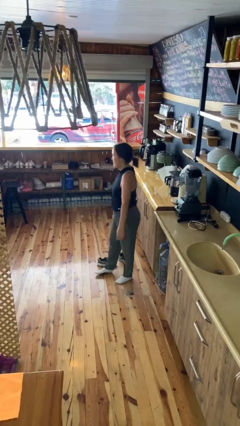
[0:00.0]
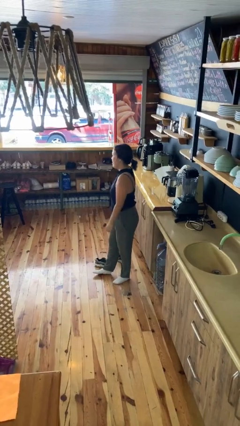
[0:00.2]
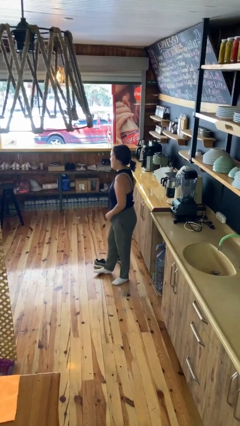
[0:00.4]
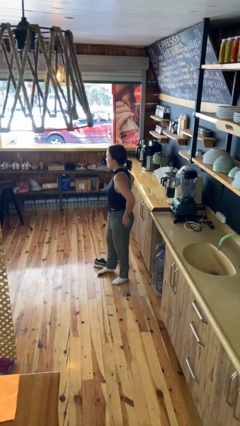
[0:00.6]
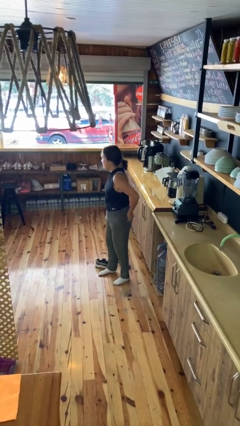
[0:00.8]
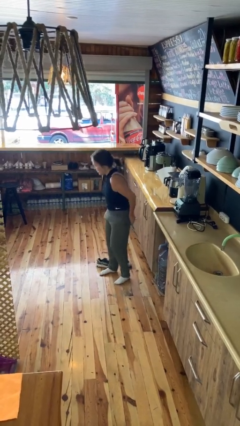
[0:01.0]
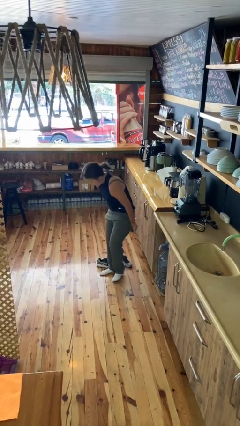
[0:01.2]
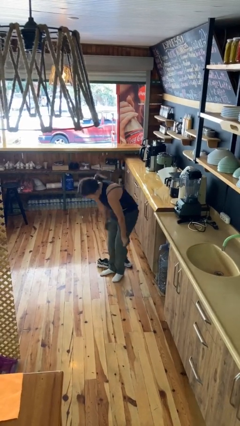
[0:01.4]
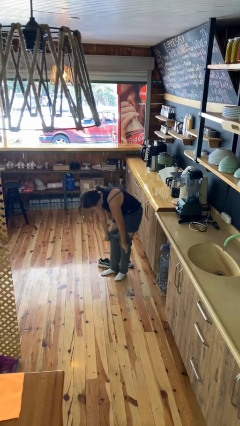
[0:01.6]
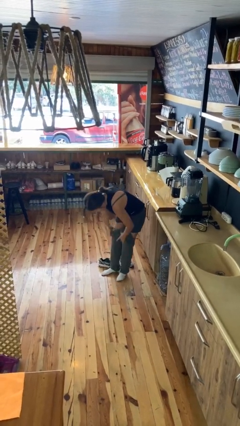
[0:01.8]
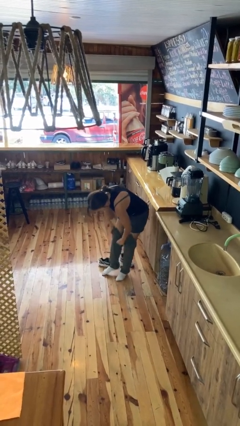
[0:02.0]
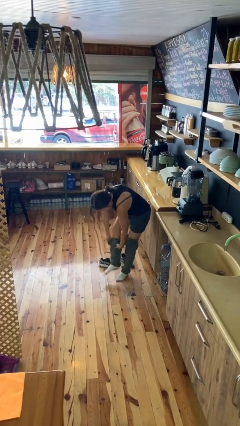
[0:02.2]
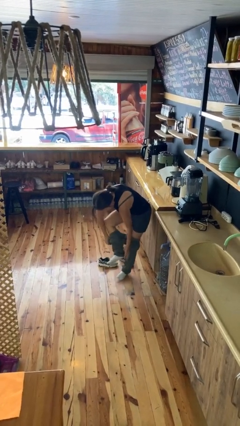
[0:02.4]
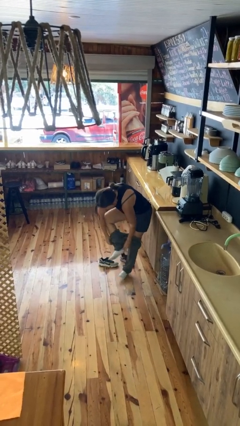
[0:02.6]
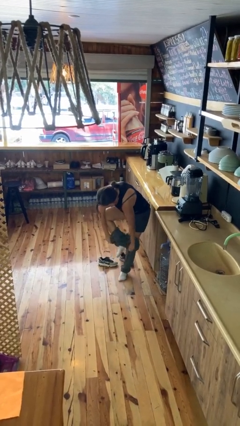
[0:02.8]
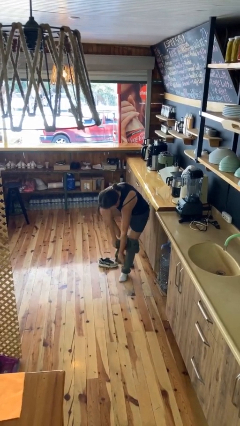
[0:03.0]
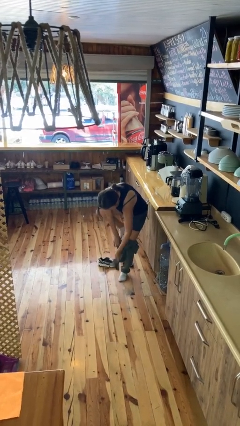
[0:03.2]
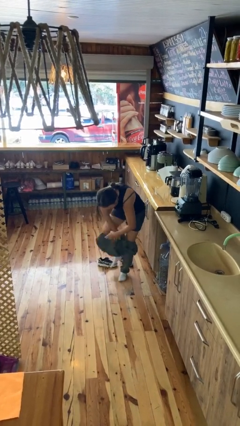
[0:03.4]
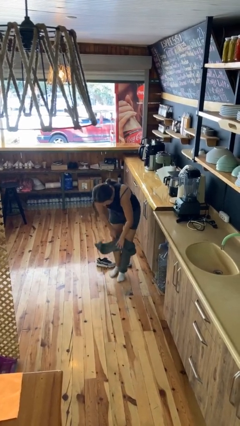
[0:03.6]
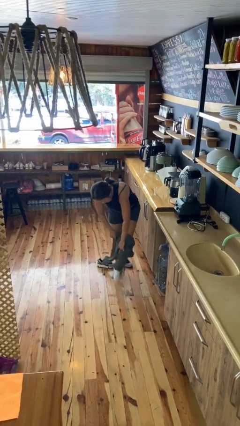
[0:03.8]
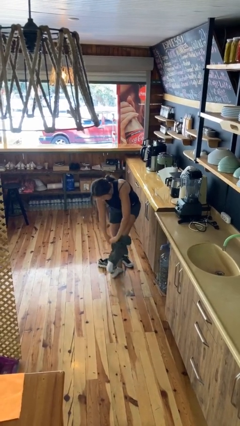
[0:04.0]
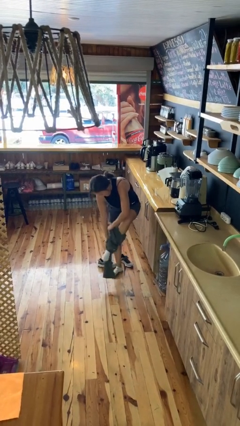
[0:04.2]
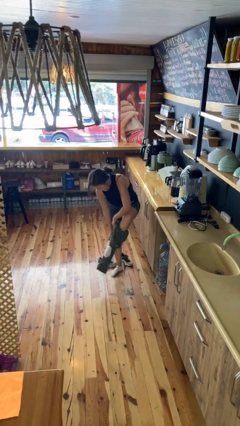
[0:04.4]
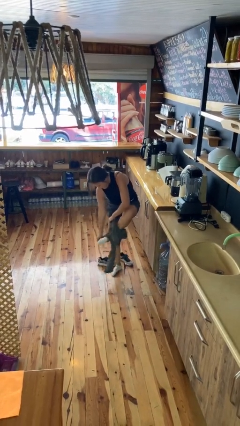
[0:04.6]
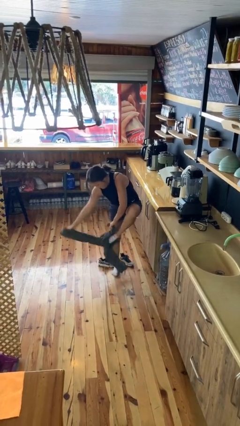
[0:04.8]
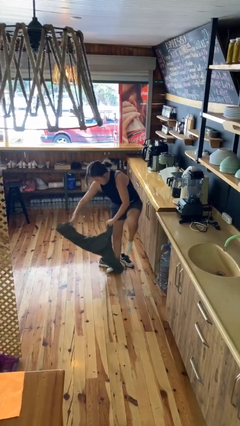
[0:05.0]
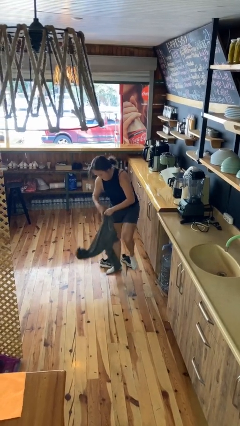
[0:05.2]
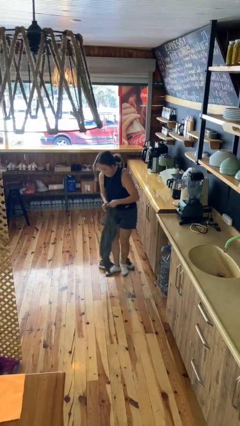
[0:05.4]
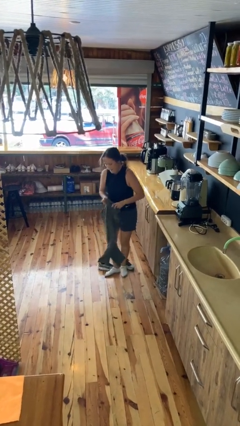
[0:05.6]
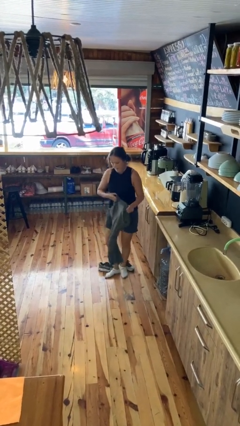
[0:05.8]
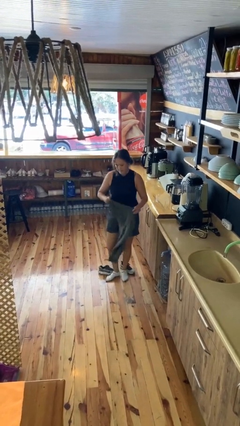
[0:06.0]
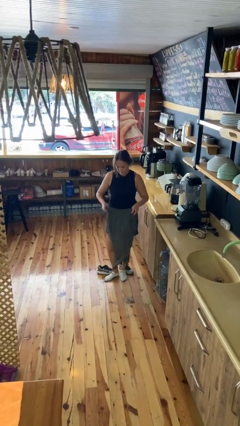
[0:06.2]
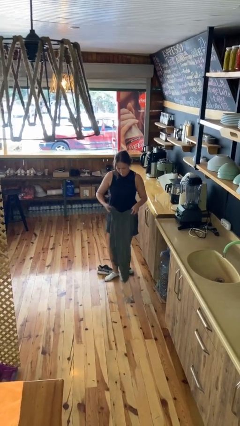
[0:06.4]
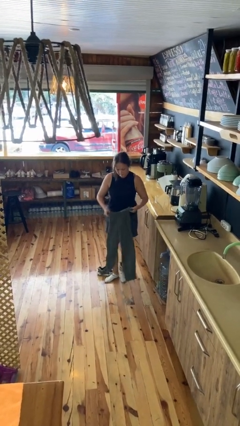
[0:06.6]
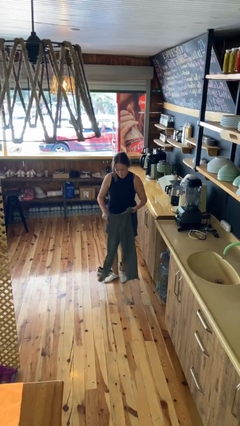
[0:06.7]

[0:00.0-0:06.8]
person takes off pants

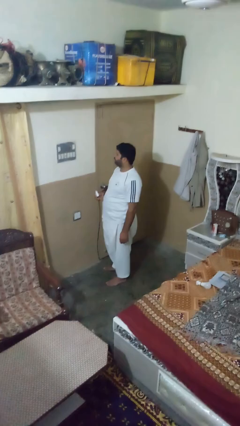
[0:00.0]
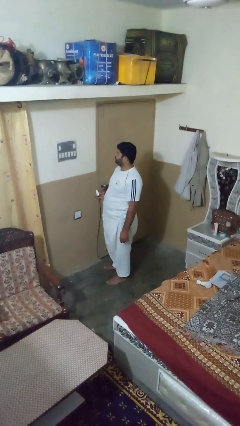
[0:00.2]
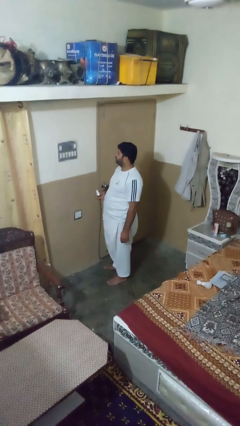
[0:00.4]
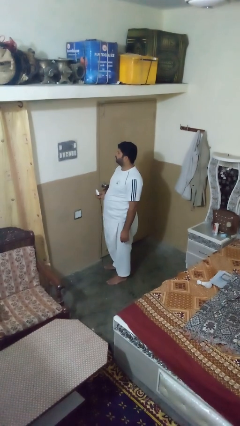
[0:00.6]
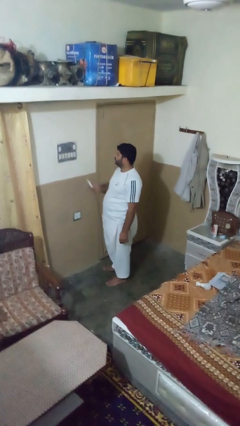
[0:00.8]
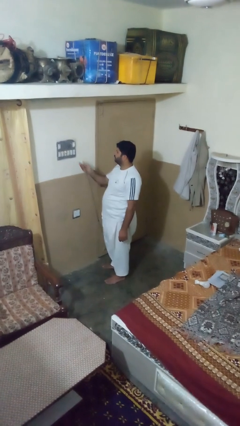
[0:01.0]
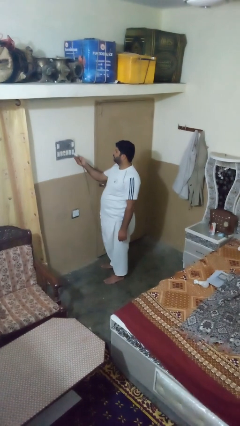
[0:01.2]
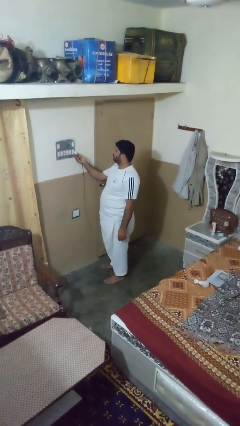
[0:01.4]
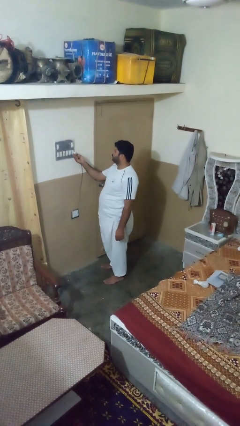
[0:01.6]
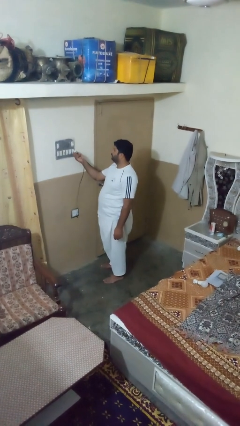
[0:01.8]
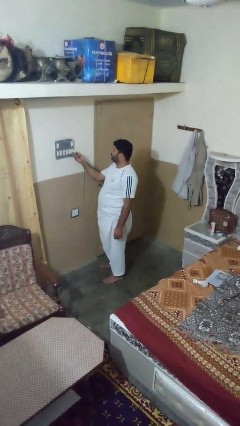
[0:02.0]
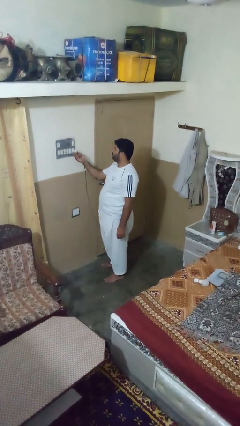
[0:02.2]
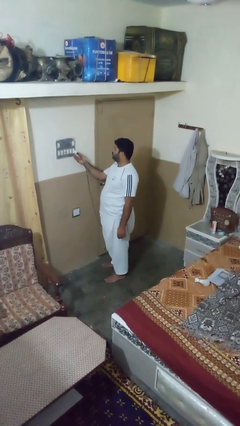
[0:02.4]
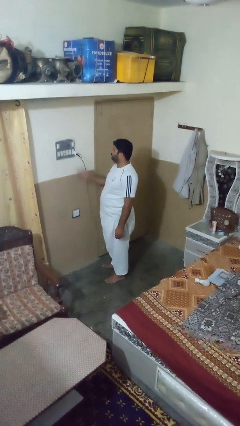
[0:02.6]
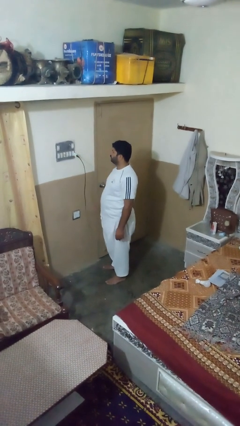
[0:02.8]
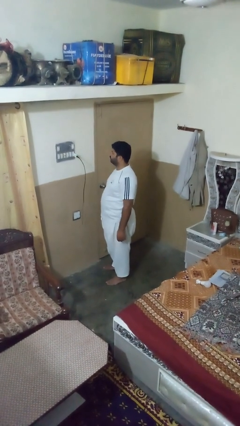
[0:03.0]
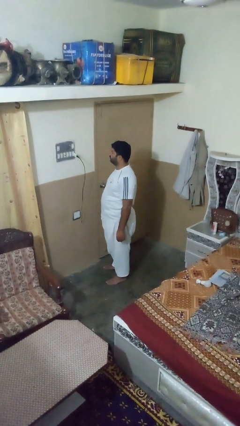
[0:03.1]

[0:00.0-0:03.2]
person plugs into electrical socket

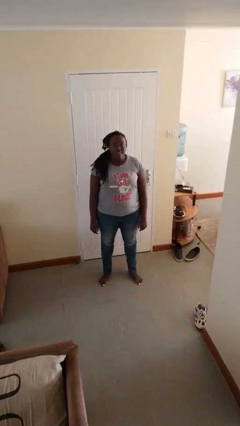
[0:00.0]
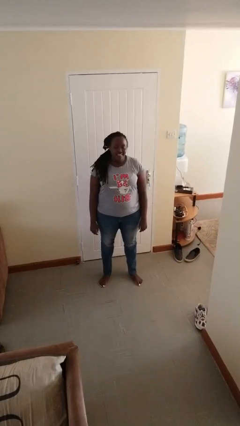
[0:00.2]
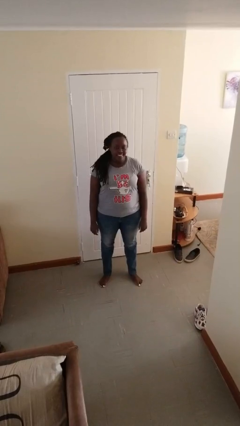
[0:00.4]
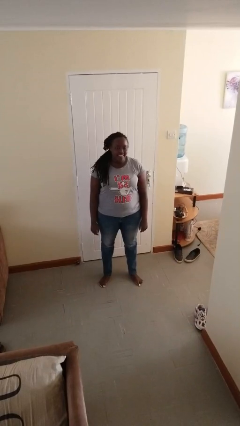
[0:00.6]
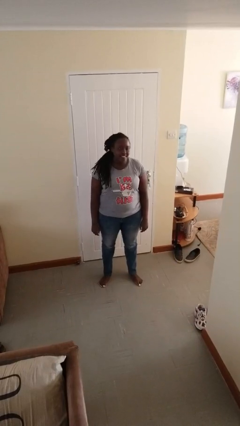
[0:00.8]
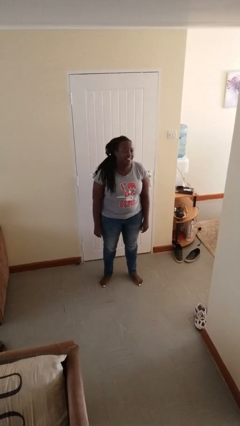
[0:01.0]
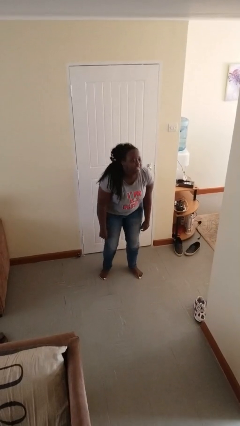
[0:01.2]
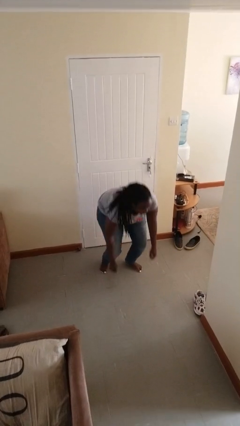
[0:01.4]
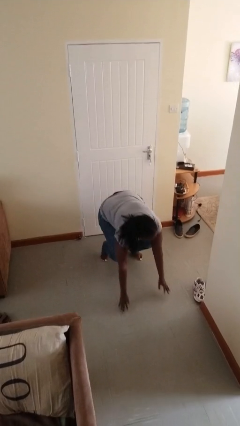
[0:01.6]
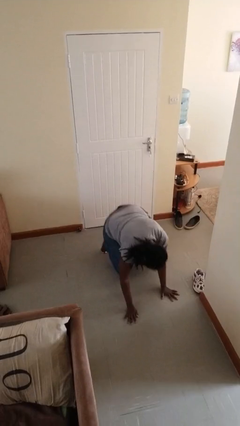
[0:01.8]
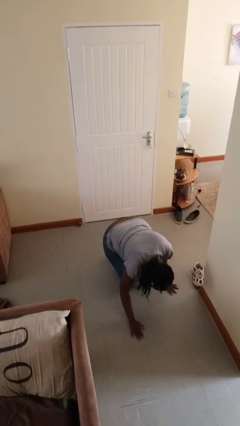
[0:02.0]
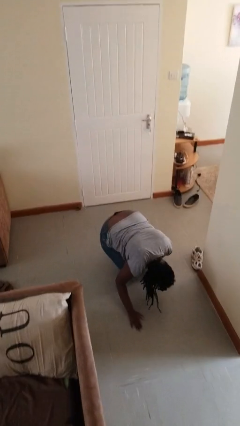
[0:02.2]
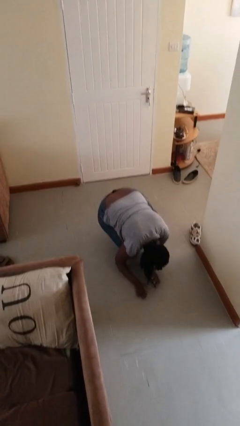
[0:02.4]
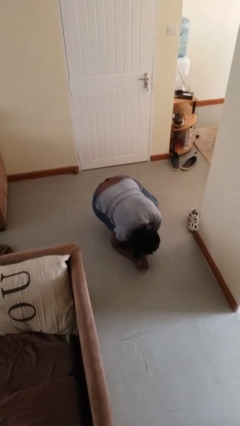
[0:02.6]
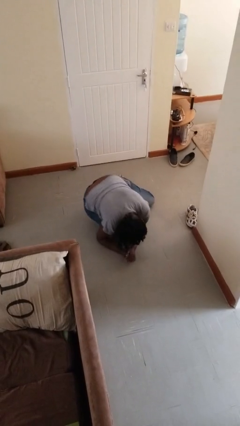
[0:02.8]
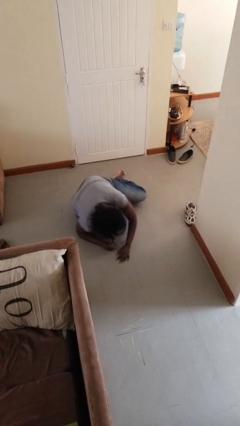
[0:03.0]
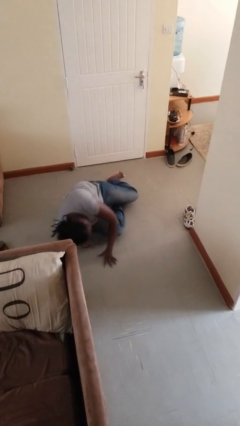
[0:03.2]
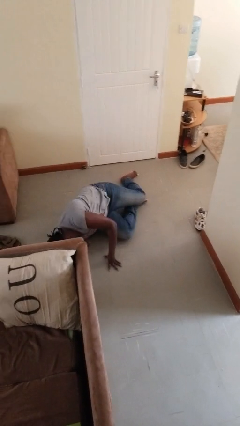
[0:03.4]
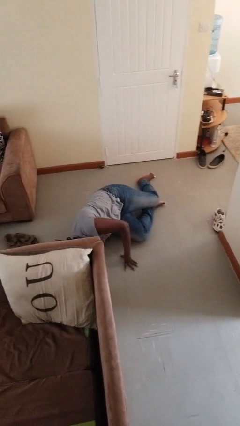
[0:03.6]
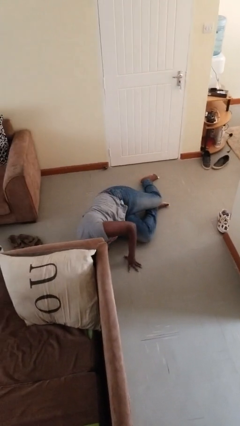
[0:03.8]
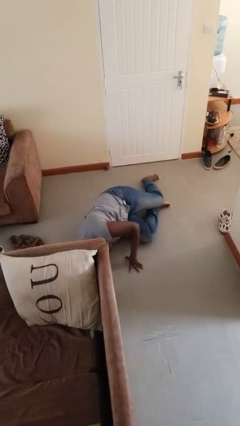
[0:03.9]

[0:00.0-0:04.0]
person falls while standing

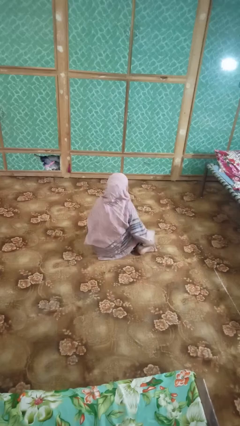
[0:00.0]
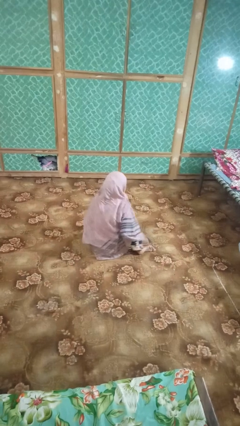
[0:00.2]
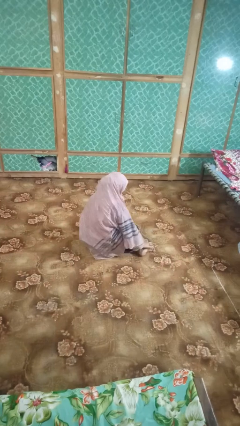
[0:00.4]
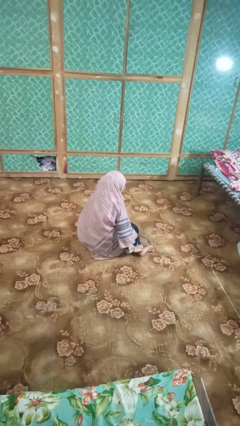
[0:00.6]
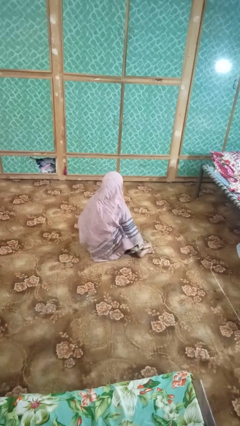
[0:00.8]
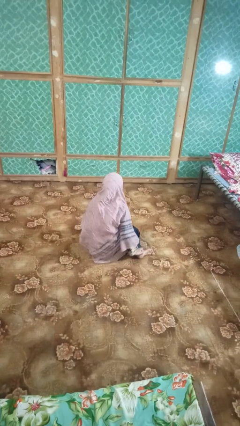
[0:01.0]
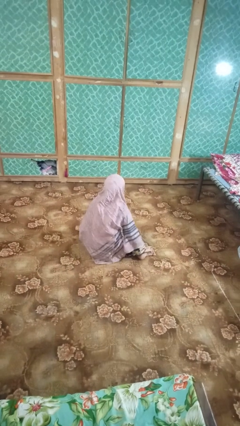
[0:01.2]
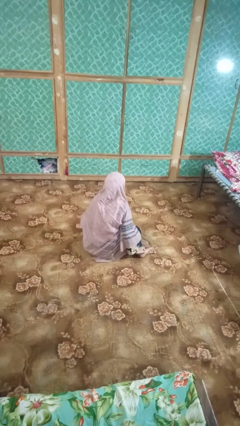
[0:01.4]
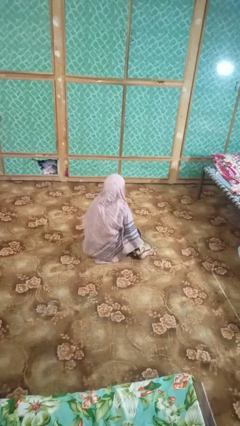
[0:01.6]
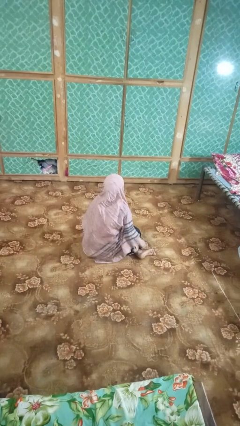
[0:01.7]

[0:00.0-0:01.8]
person rubs foot

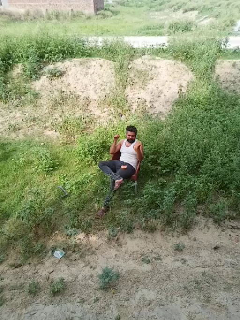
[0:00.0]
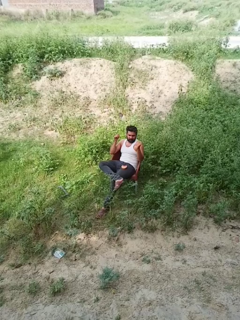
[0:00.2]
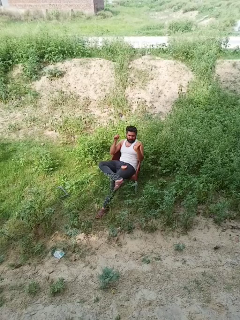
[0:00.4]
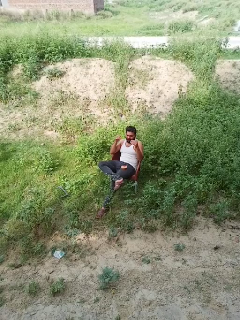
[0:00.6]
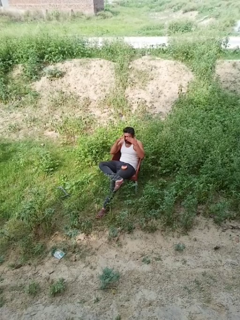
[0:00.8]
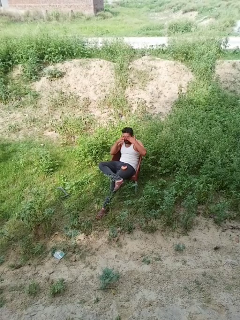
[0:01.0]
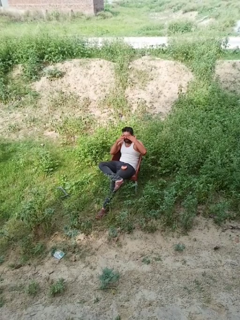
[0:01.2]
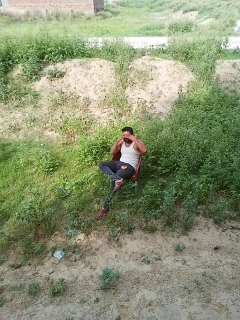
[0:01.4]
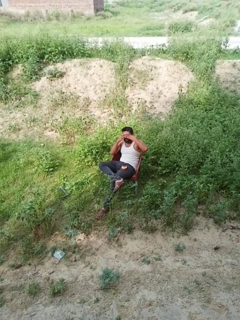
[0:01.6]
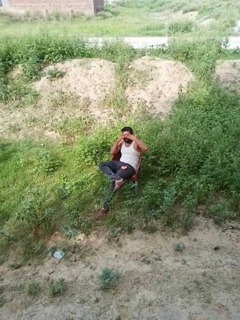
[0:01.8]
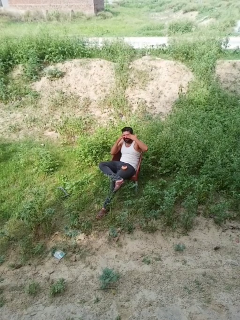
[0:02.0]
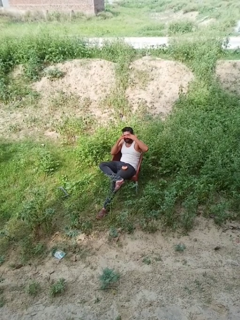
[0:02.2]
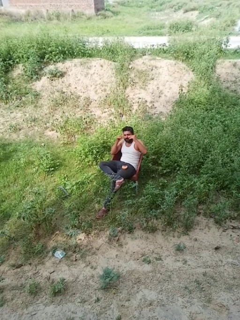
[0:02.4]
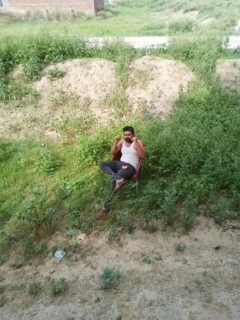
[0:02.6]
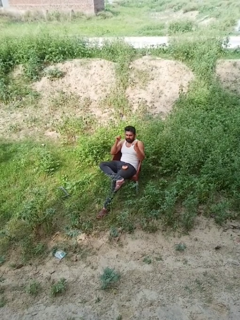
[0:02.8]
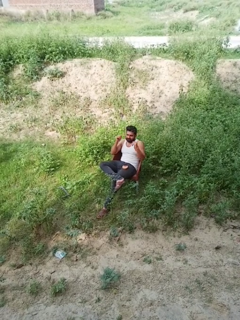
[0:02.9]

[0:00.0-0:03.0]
person rubs eyes
